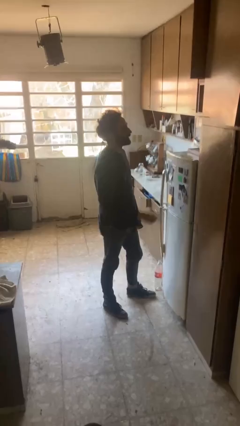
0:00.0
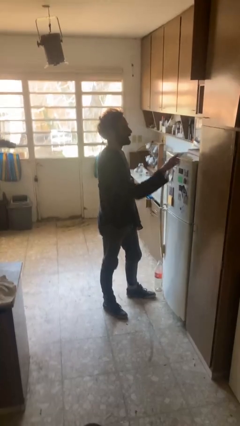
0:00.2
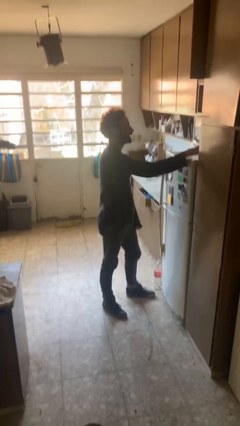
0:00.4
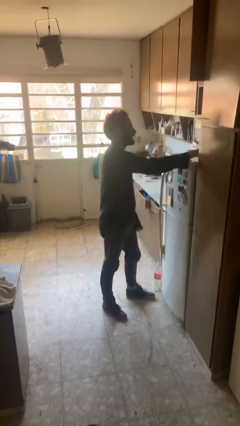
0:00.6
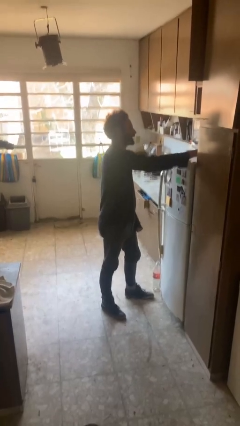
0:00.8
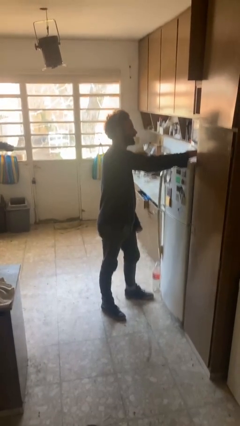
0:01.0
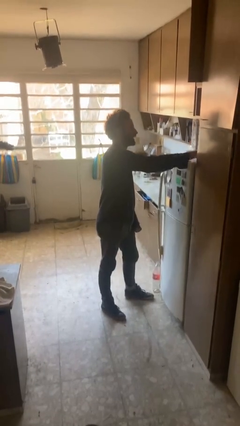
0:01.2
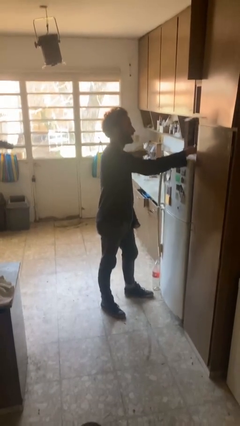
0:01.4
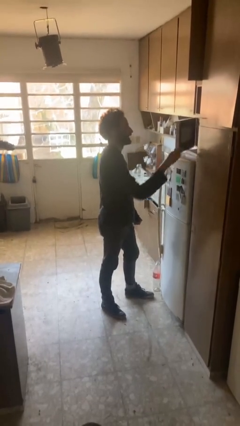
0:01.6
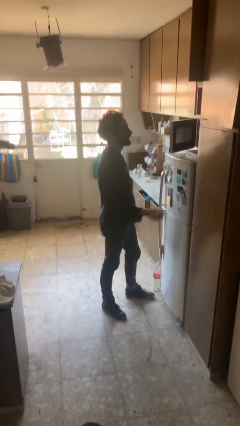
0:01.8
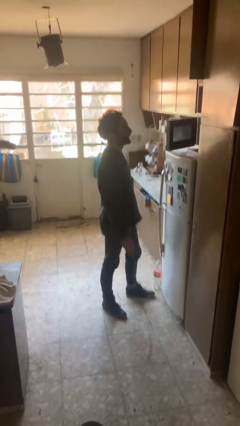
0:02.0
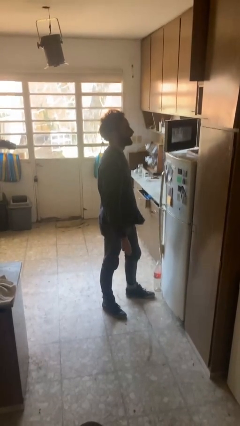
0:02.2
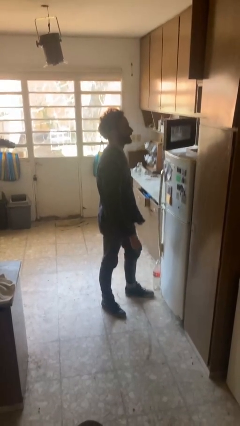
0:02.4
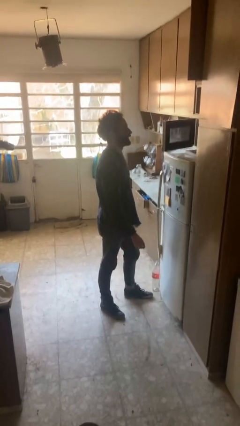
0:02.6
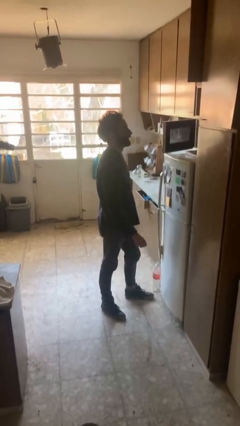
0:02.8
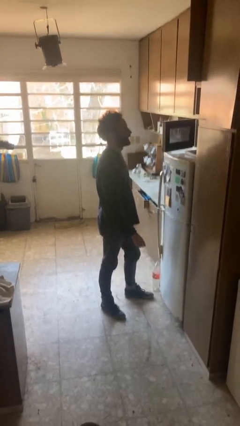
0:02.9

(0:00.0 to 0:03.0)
person opens microwave

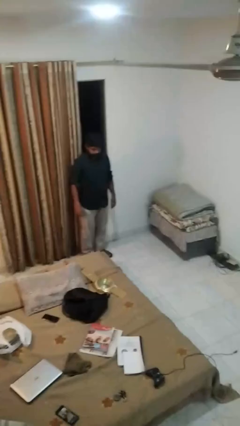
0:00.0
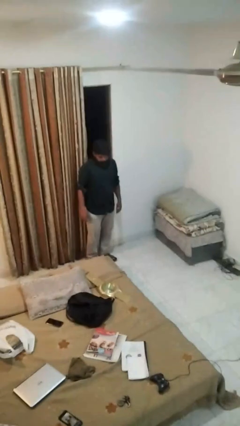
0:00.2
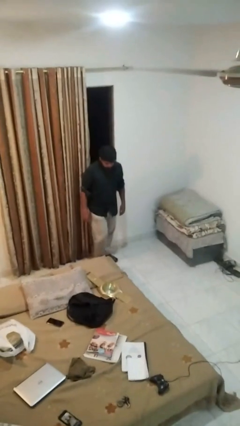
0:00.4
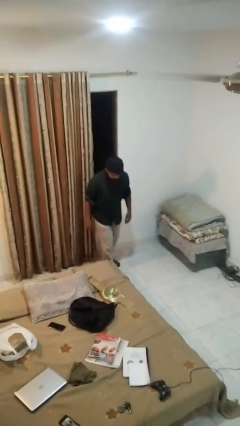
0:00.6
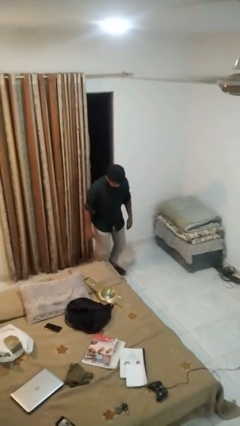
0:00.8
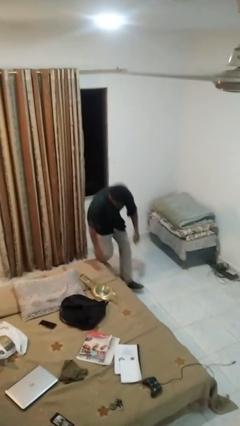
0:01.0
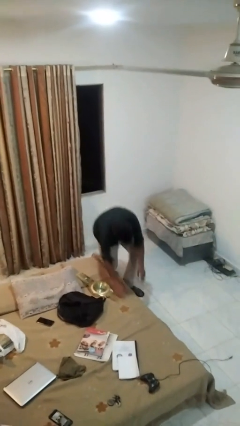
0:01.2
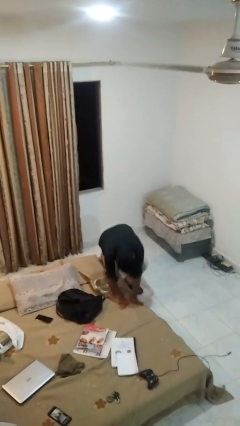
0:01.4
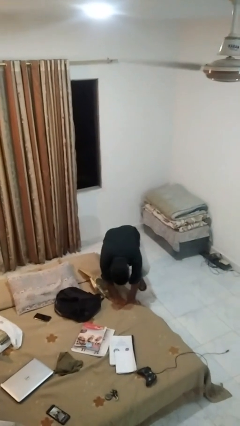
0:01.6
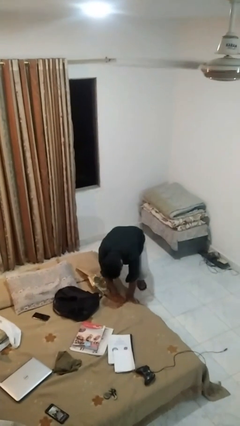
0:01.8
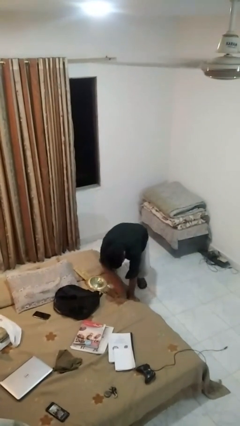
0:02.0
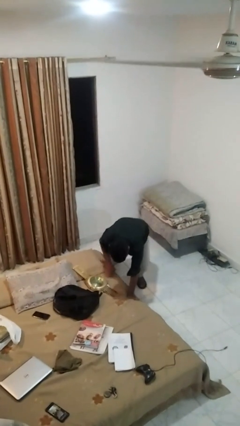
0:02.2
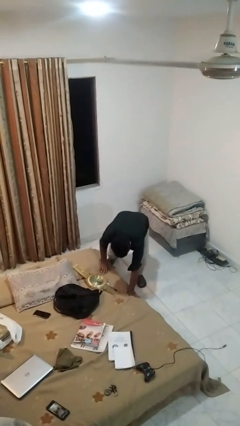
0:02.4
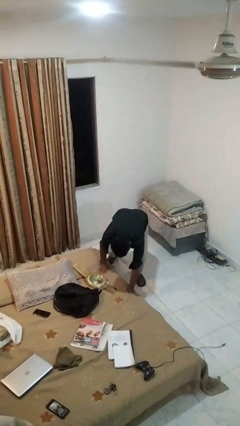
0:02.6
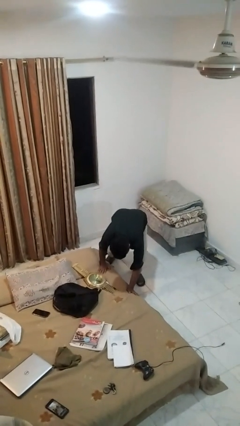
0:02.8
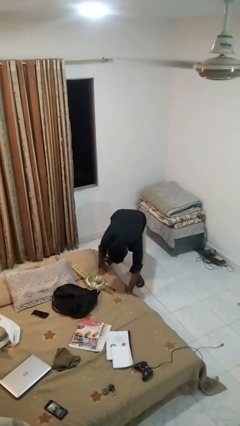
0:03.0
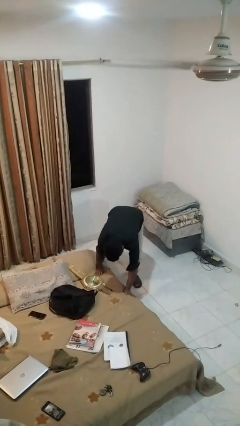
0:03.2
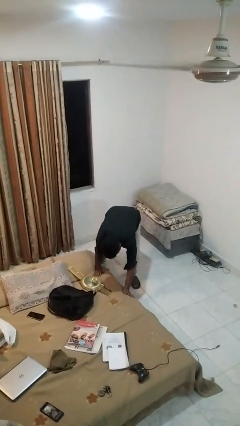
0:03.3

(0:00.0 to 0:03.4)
person trips on object on floor

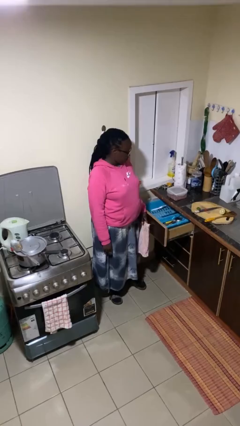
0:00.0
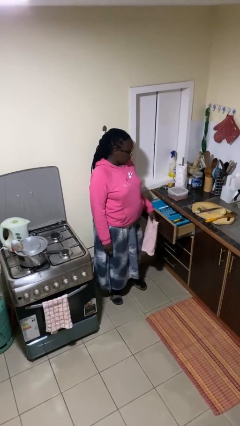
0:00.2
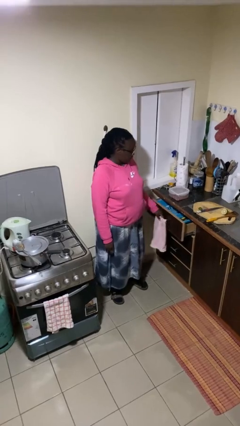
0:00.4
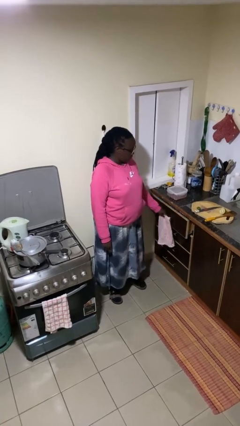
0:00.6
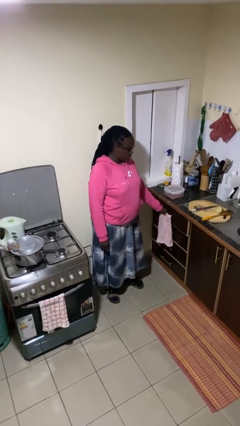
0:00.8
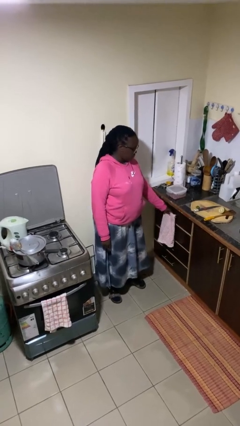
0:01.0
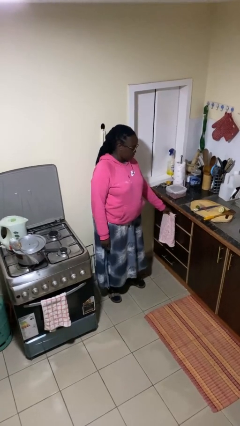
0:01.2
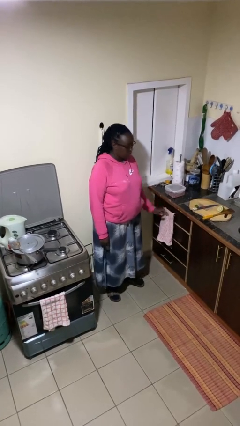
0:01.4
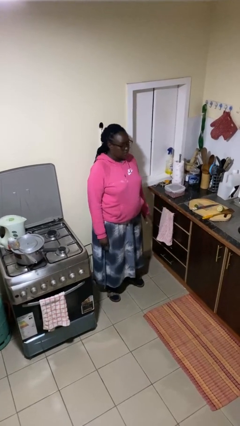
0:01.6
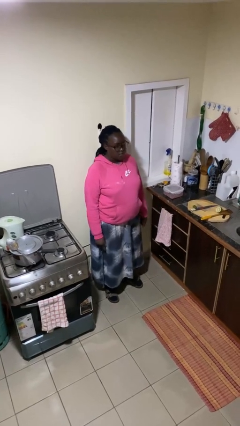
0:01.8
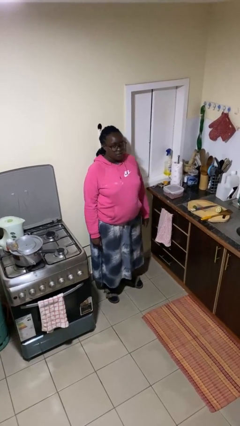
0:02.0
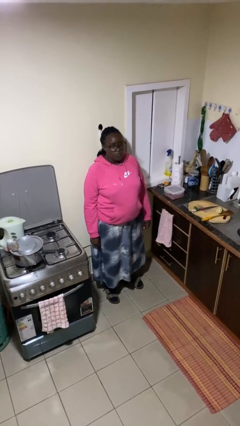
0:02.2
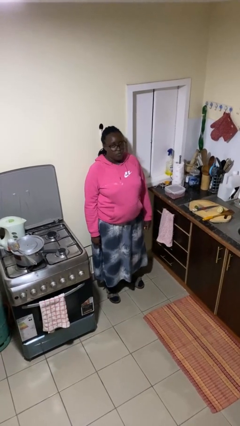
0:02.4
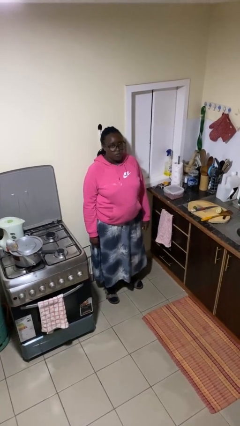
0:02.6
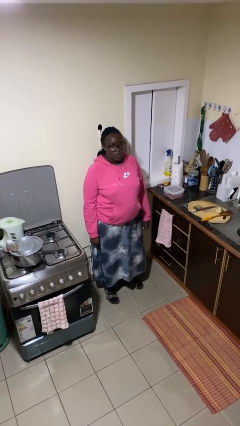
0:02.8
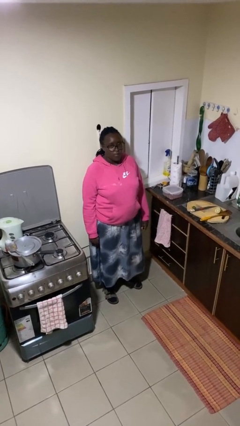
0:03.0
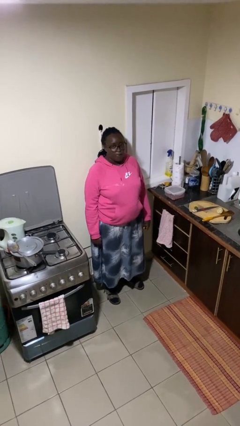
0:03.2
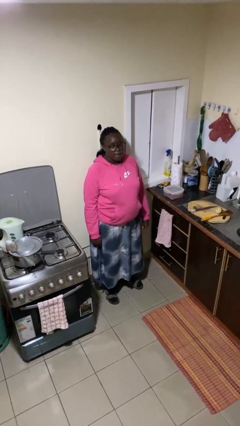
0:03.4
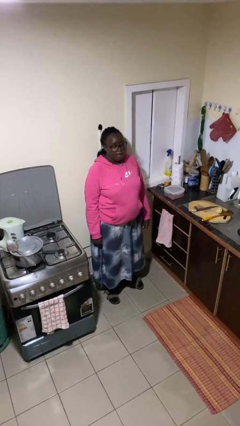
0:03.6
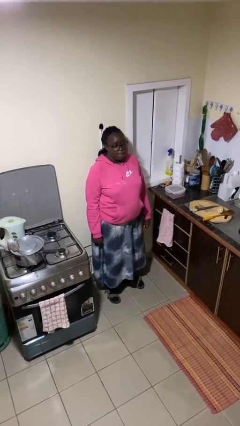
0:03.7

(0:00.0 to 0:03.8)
person closes kitchen drawer

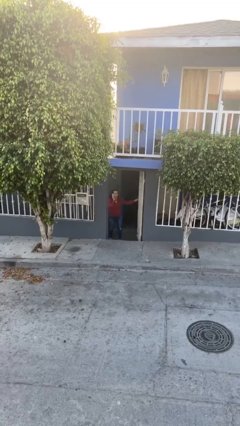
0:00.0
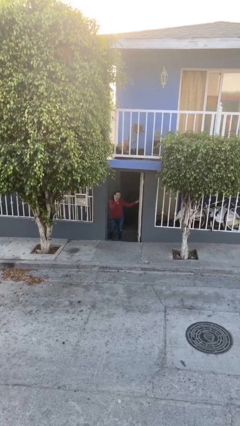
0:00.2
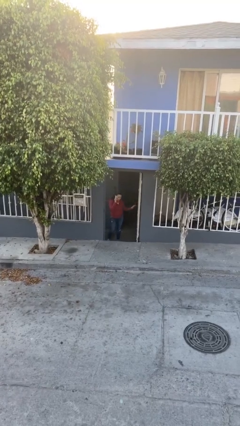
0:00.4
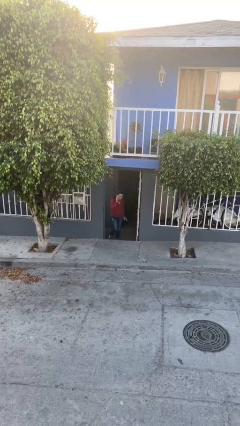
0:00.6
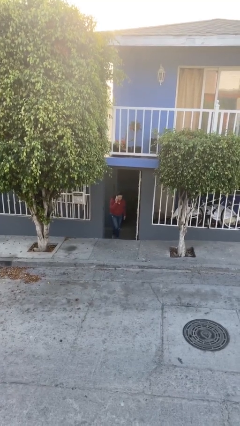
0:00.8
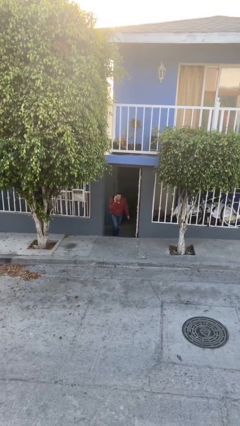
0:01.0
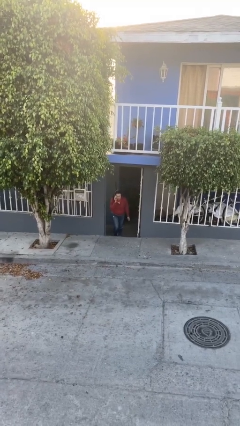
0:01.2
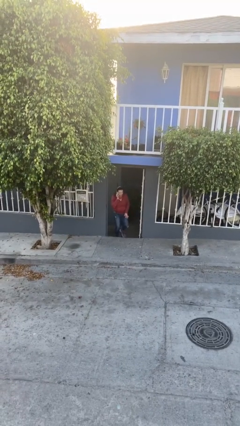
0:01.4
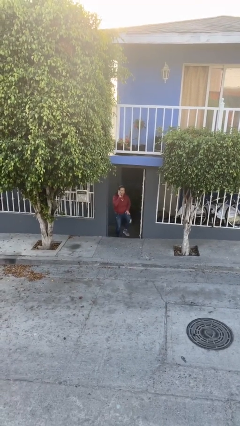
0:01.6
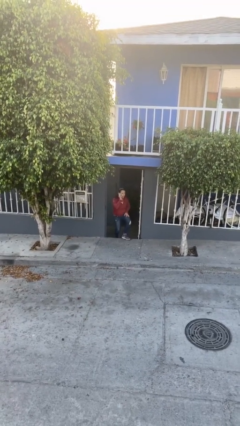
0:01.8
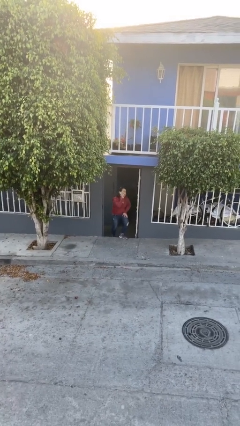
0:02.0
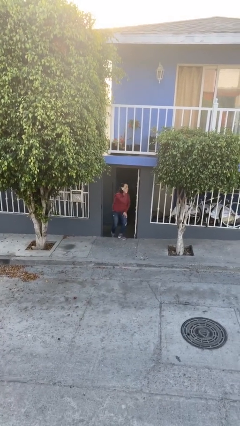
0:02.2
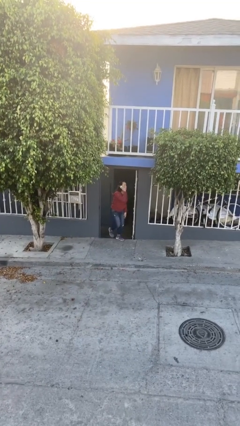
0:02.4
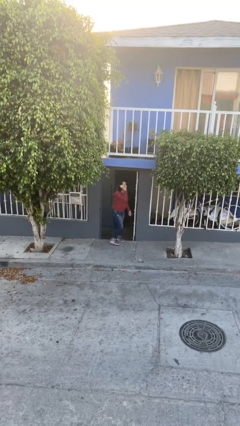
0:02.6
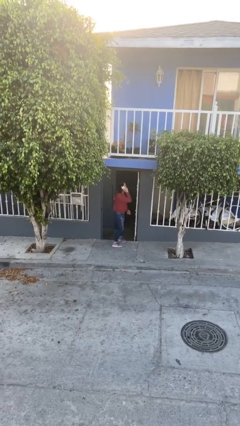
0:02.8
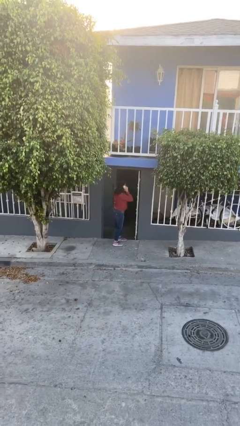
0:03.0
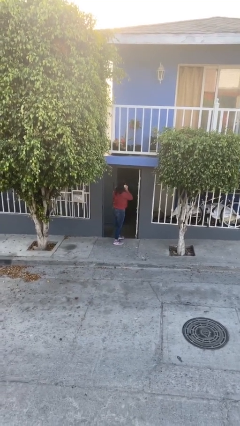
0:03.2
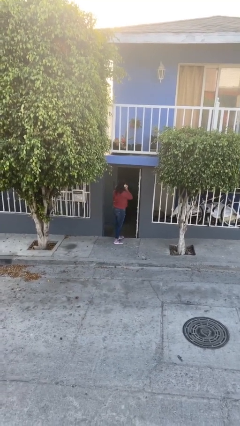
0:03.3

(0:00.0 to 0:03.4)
person enters scene through structure

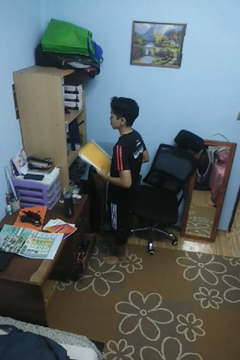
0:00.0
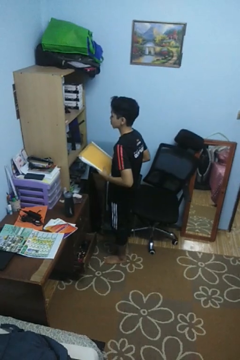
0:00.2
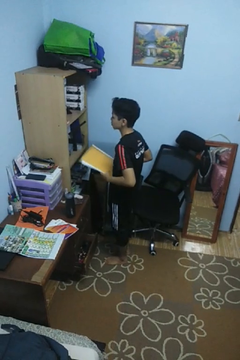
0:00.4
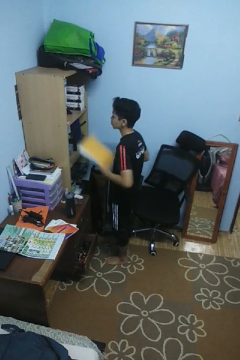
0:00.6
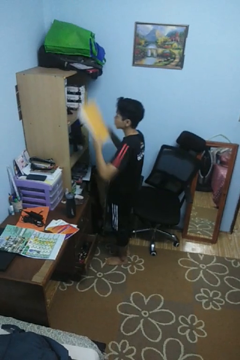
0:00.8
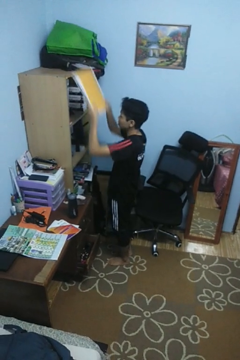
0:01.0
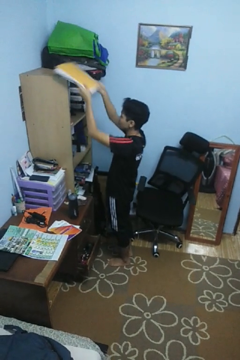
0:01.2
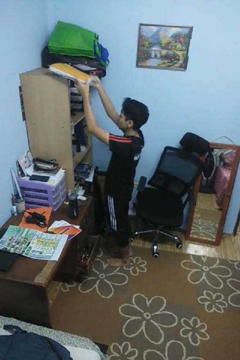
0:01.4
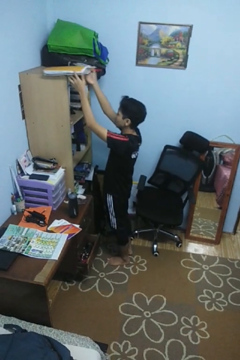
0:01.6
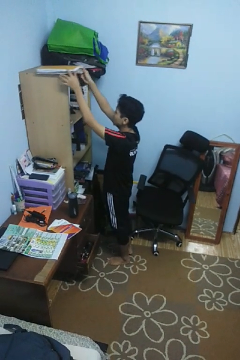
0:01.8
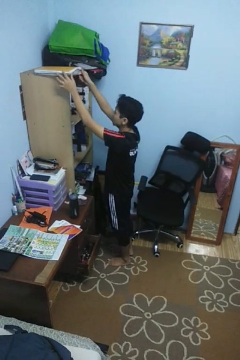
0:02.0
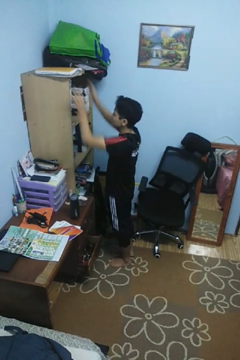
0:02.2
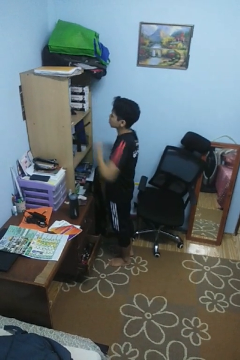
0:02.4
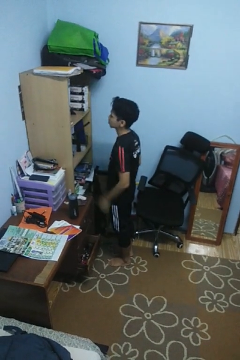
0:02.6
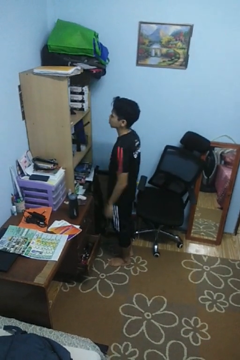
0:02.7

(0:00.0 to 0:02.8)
person puts down object on shelf

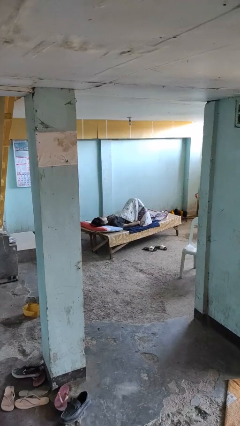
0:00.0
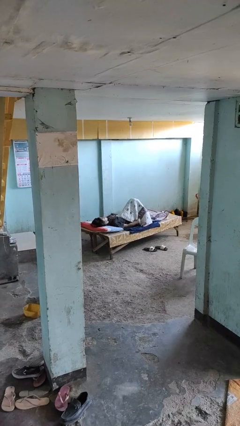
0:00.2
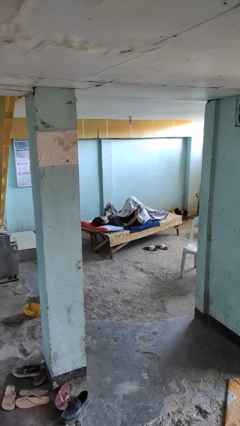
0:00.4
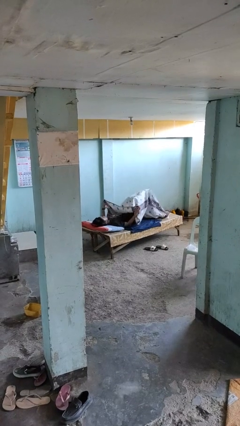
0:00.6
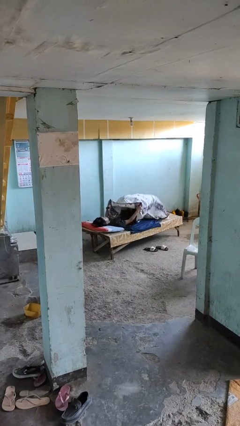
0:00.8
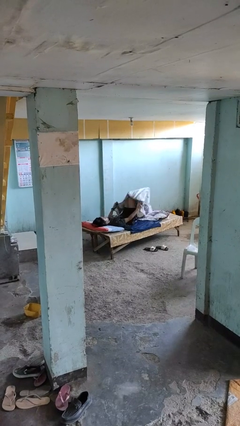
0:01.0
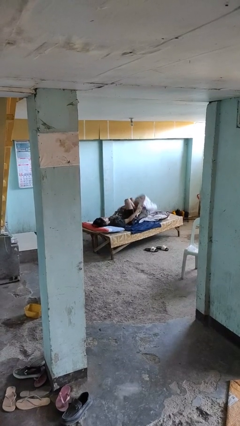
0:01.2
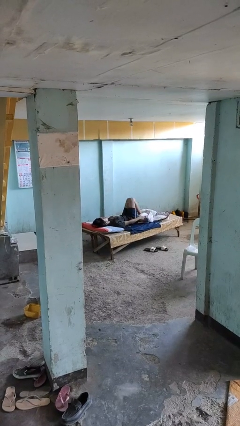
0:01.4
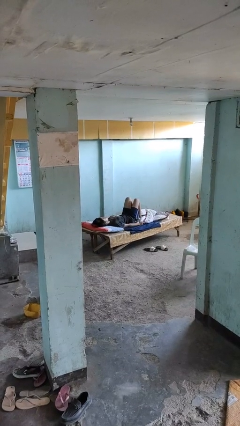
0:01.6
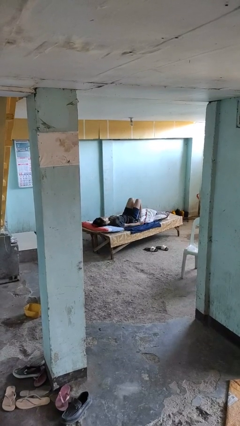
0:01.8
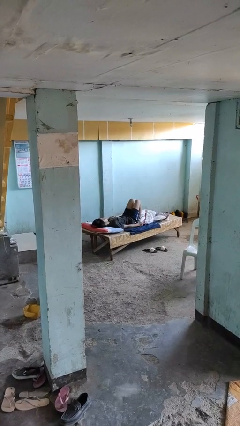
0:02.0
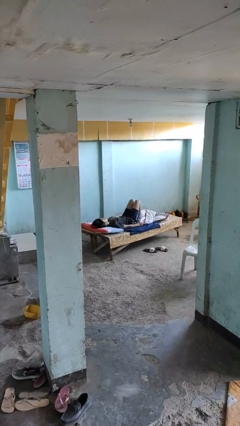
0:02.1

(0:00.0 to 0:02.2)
person uncovers with bedsheets
